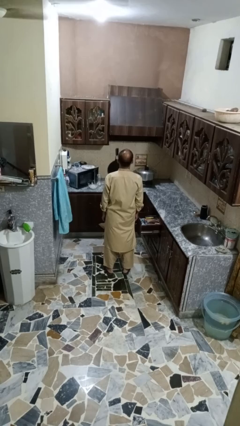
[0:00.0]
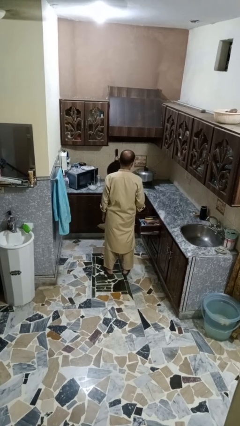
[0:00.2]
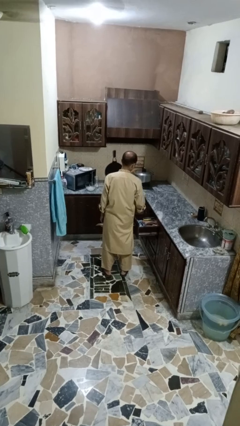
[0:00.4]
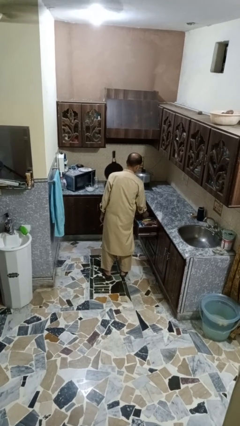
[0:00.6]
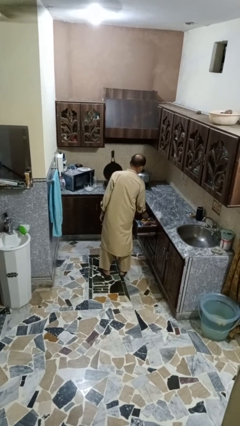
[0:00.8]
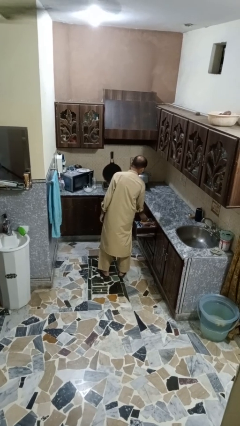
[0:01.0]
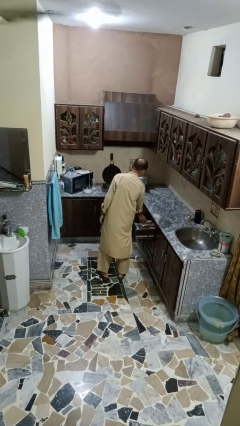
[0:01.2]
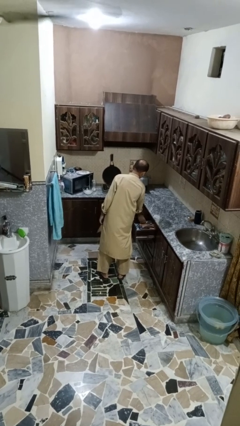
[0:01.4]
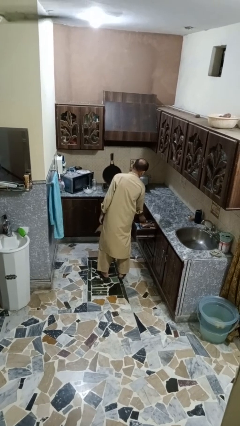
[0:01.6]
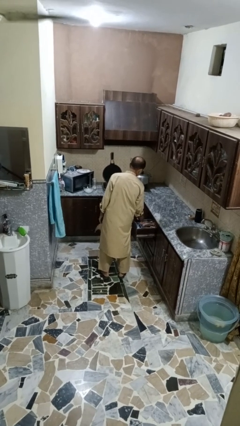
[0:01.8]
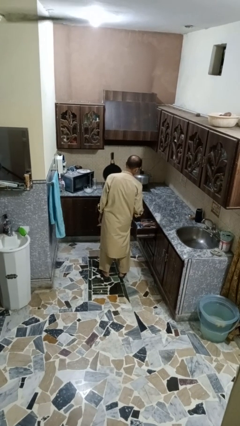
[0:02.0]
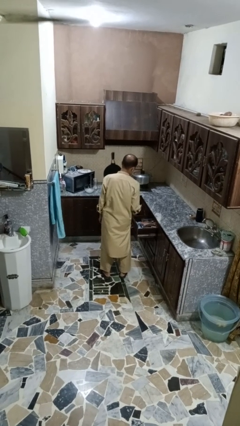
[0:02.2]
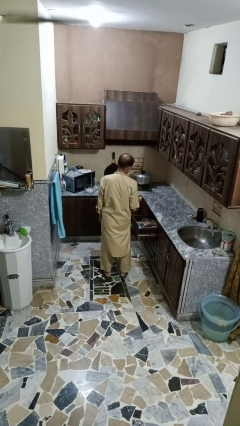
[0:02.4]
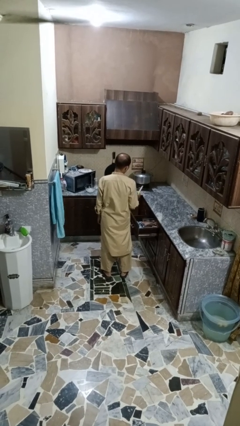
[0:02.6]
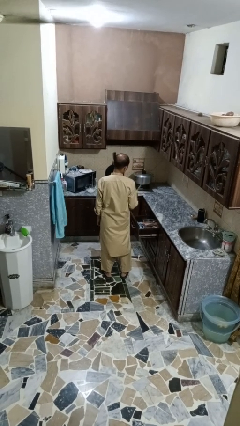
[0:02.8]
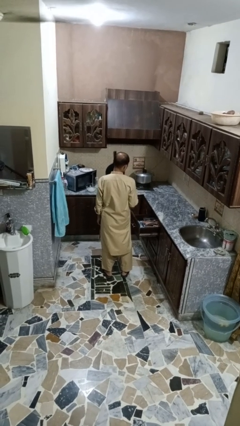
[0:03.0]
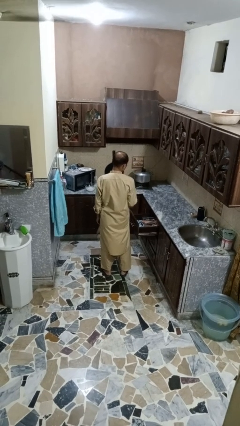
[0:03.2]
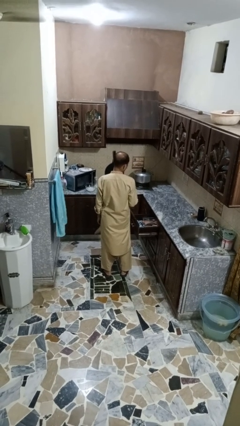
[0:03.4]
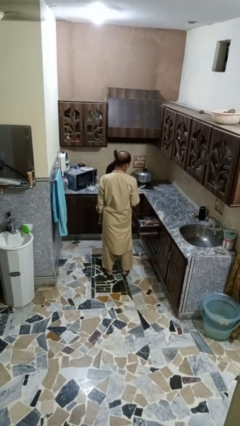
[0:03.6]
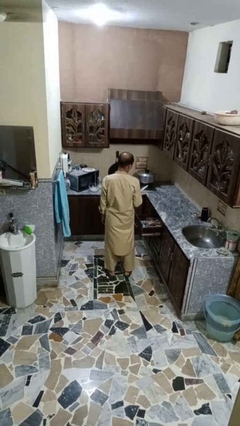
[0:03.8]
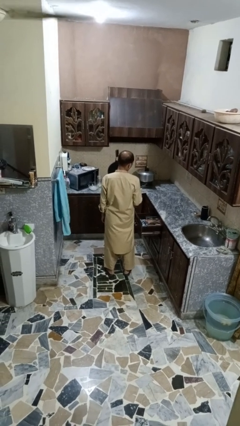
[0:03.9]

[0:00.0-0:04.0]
person takes object from kitchen drawer

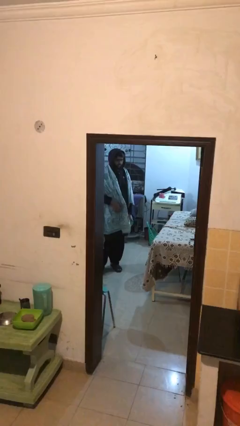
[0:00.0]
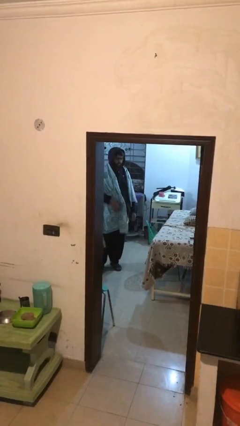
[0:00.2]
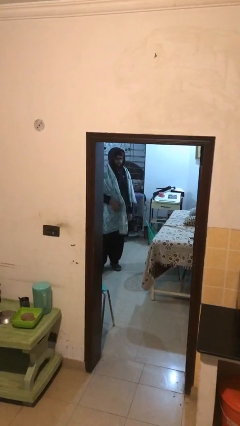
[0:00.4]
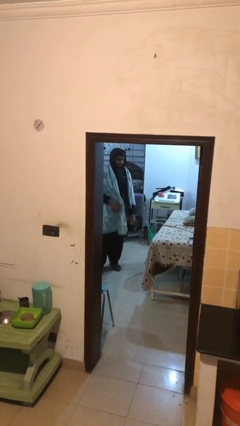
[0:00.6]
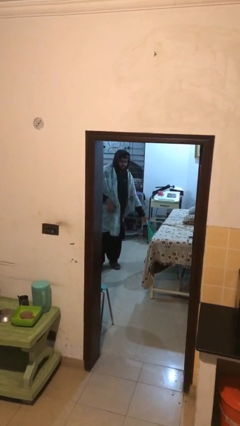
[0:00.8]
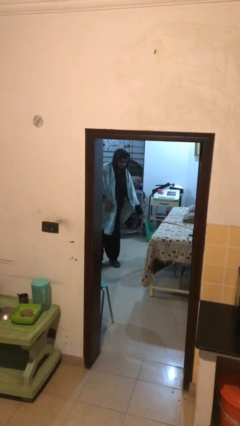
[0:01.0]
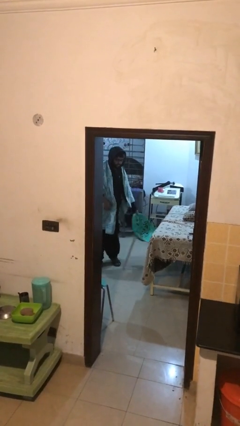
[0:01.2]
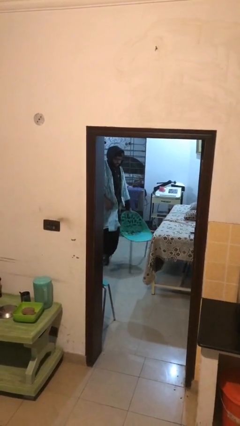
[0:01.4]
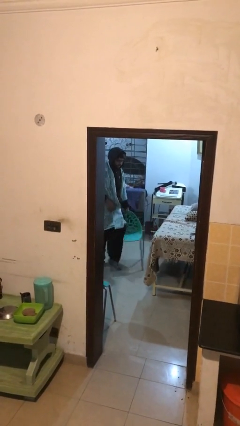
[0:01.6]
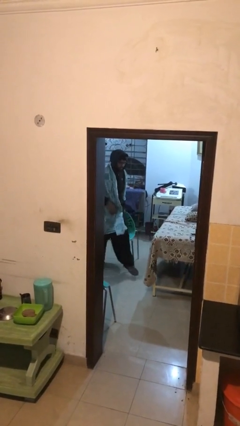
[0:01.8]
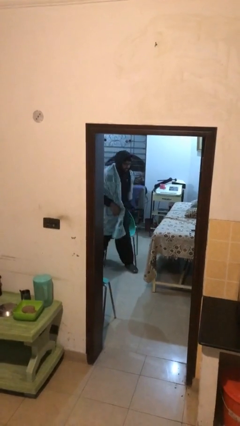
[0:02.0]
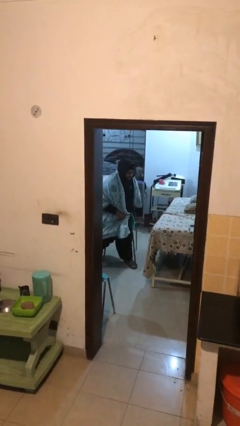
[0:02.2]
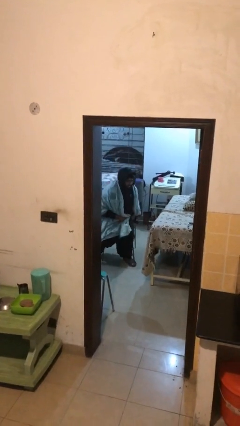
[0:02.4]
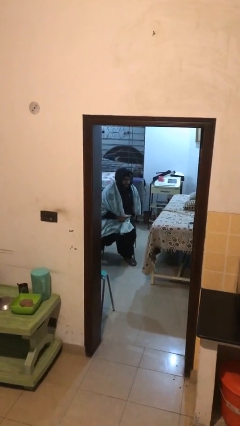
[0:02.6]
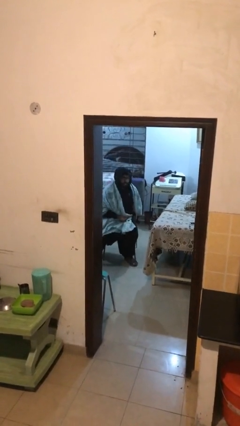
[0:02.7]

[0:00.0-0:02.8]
person sits down

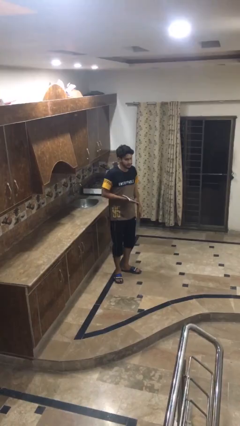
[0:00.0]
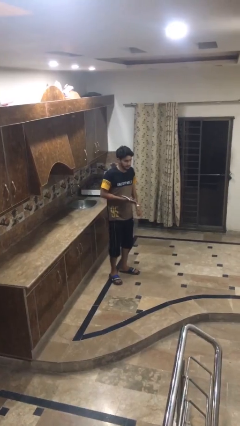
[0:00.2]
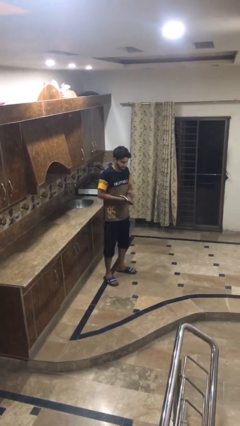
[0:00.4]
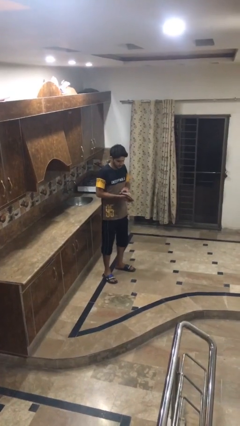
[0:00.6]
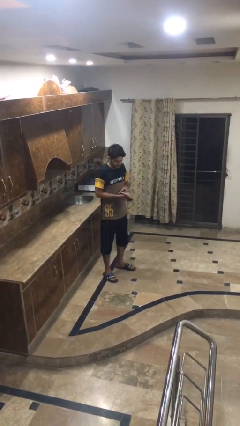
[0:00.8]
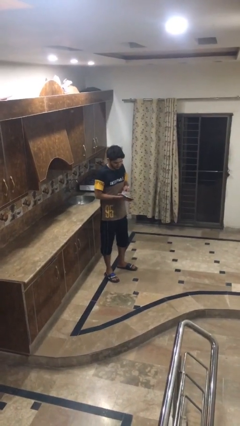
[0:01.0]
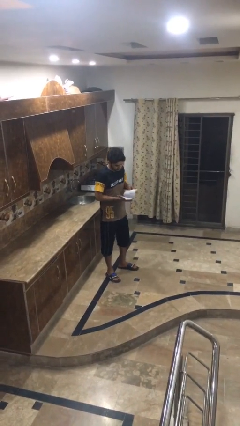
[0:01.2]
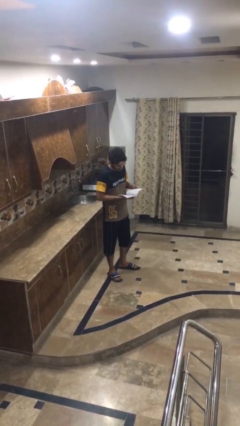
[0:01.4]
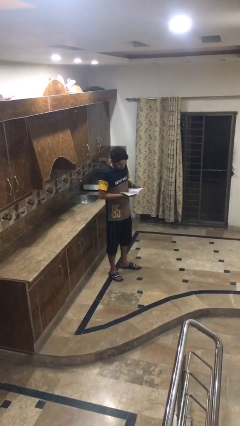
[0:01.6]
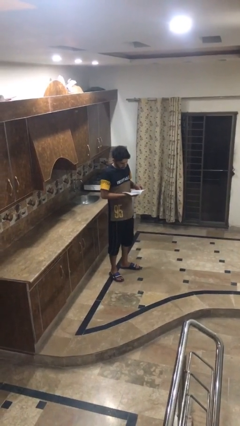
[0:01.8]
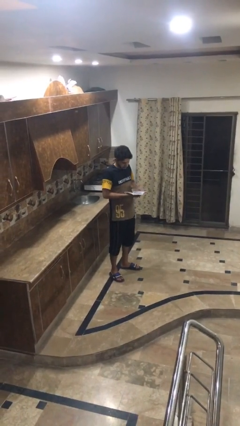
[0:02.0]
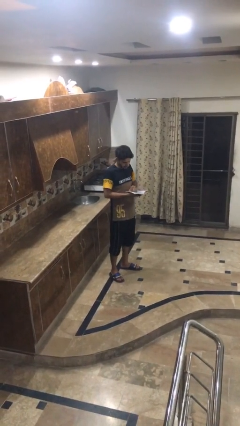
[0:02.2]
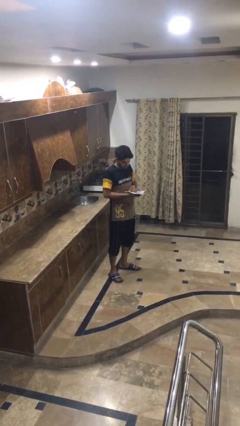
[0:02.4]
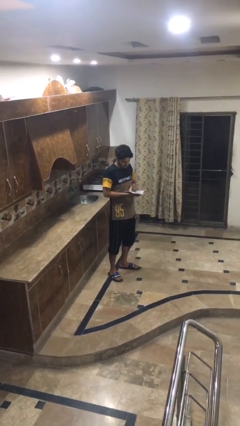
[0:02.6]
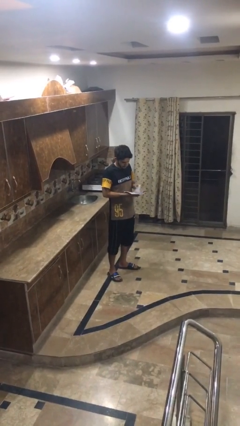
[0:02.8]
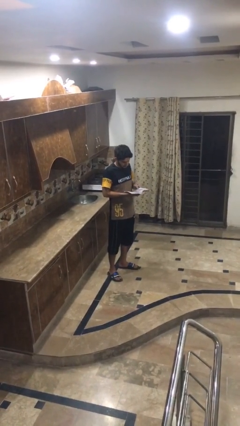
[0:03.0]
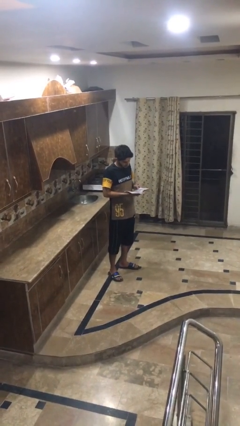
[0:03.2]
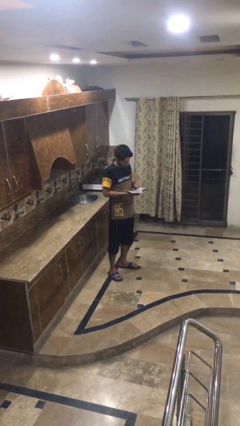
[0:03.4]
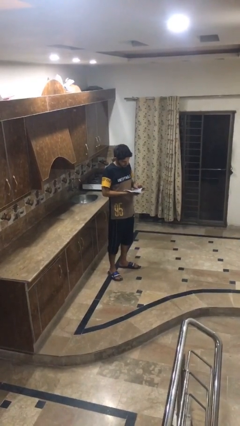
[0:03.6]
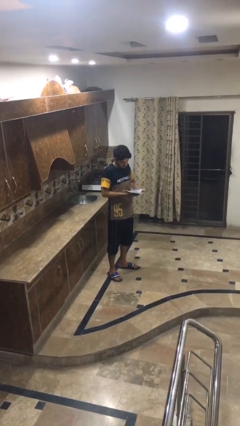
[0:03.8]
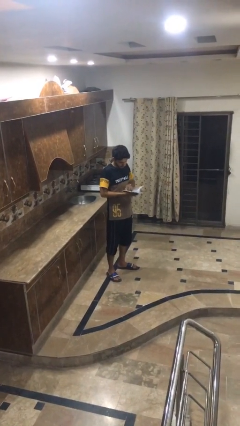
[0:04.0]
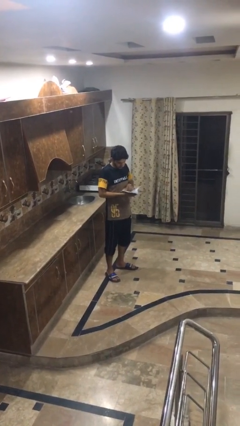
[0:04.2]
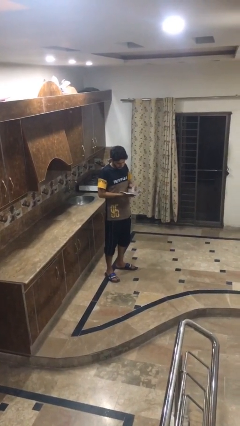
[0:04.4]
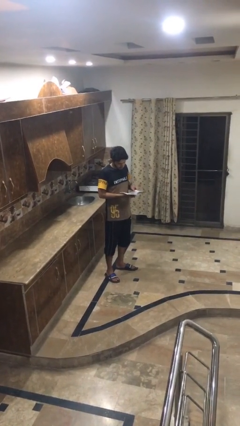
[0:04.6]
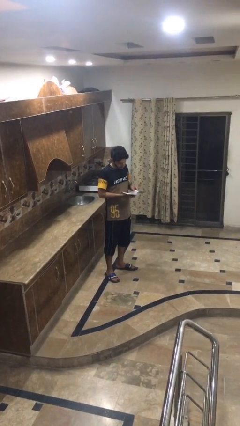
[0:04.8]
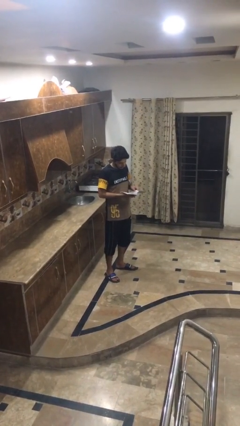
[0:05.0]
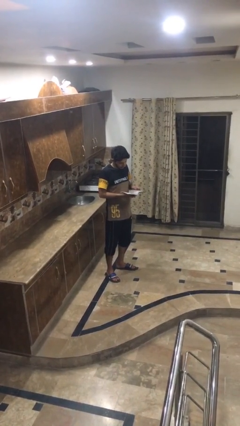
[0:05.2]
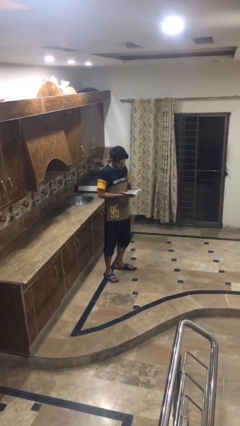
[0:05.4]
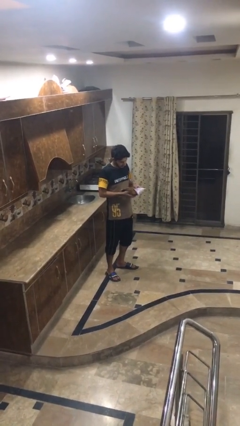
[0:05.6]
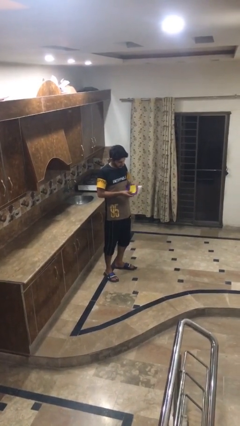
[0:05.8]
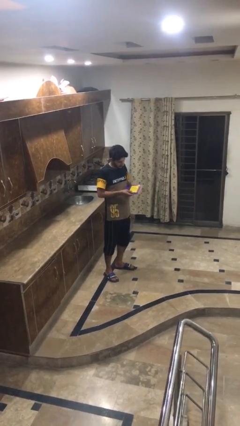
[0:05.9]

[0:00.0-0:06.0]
person reads book

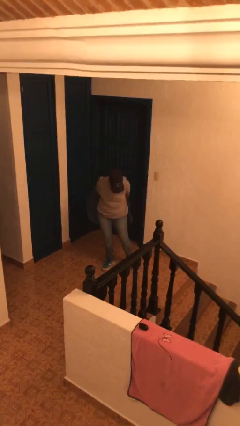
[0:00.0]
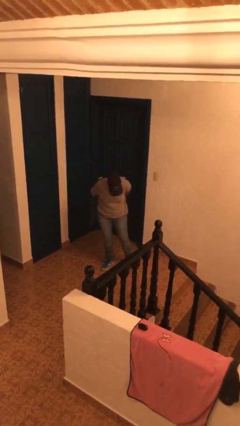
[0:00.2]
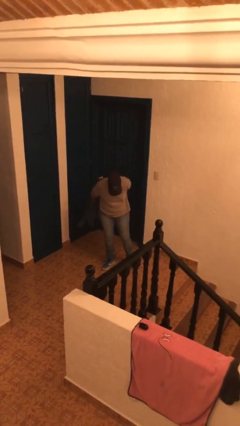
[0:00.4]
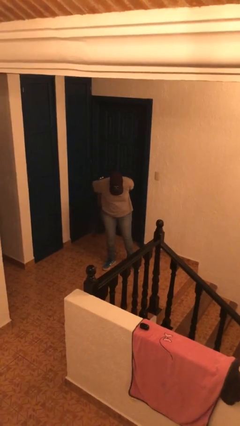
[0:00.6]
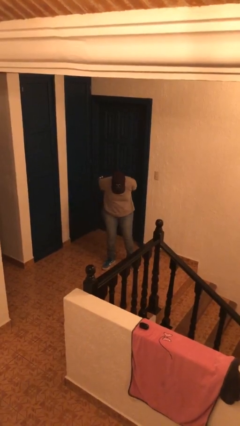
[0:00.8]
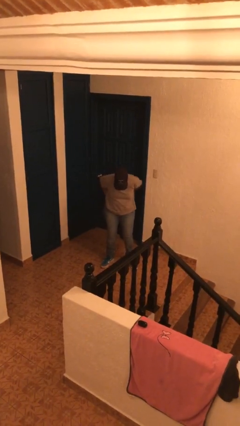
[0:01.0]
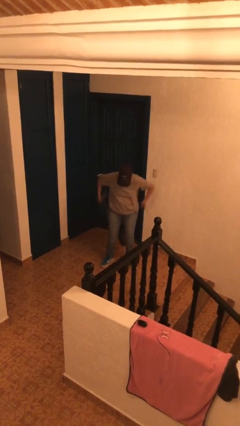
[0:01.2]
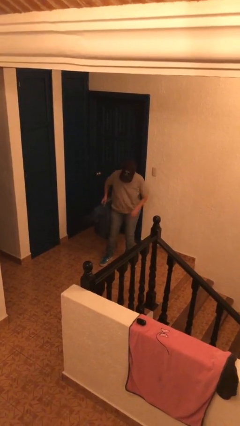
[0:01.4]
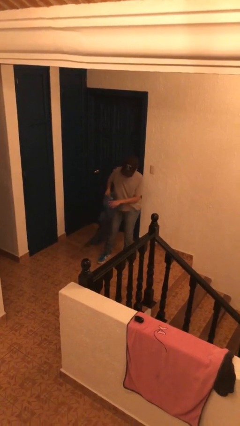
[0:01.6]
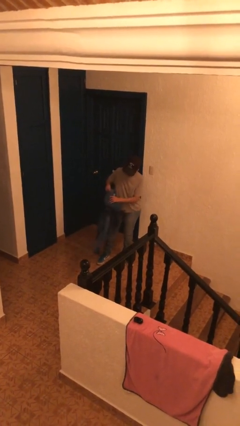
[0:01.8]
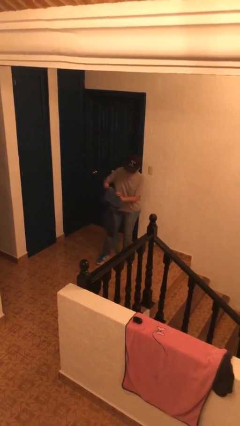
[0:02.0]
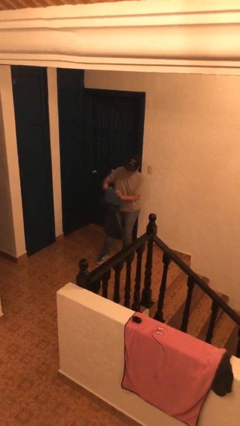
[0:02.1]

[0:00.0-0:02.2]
person takes off jacket

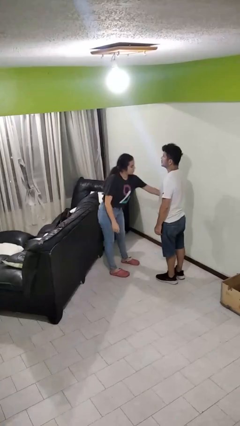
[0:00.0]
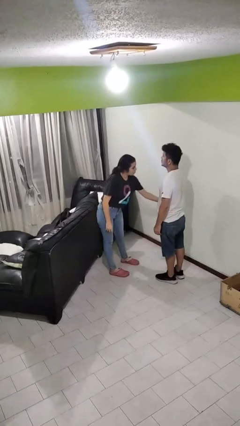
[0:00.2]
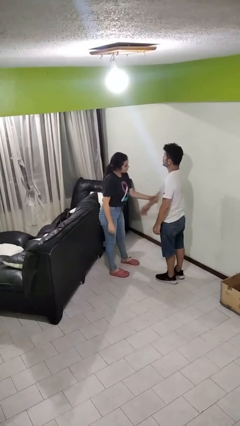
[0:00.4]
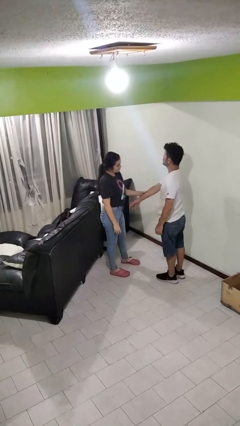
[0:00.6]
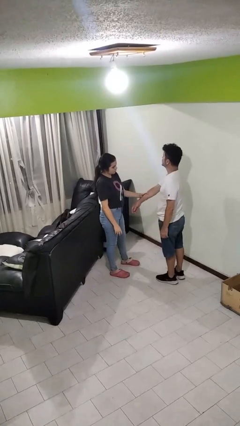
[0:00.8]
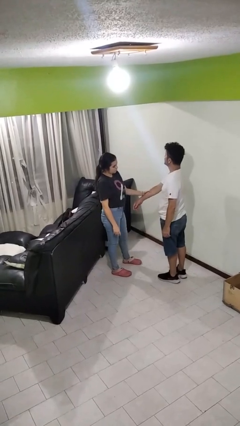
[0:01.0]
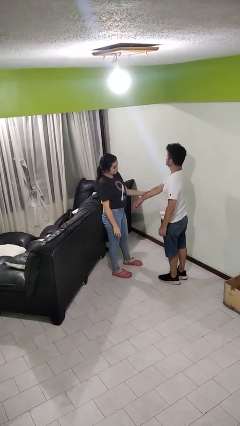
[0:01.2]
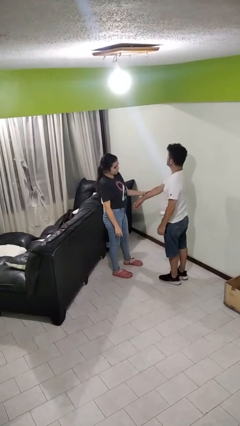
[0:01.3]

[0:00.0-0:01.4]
person grabs person by forearm

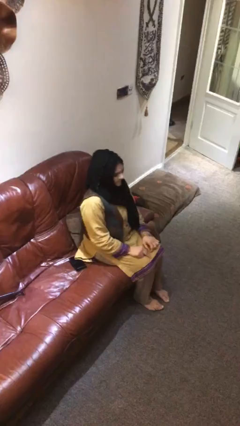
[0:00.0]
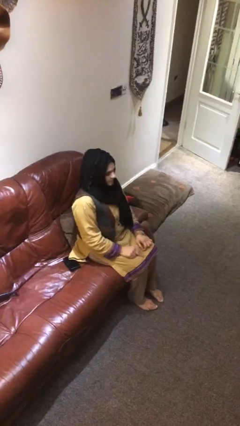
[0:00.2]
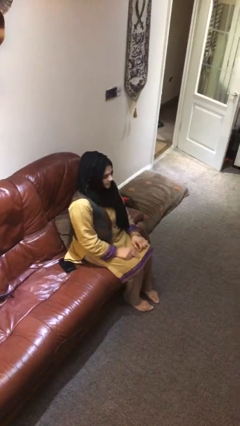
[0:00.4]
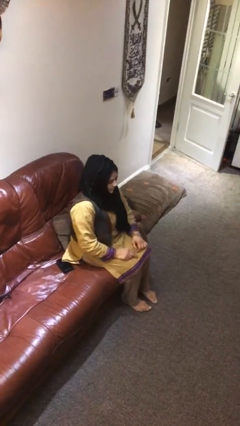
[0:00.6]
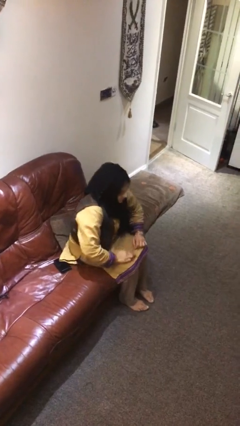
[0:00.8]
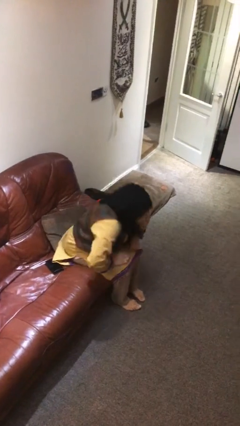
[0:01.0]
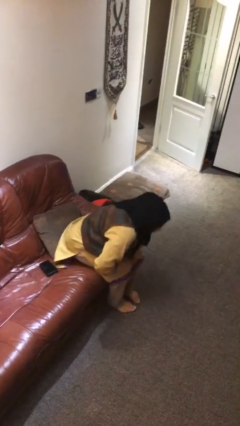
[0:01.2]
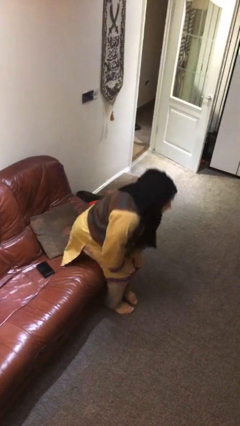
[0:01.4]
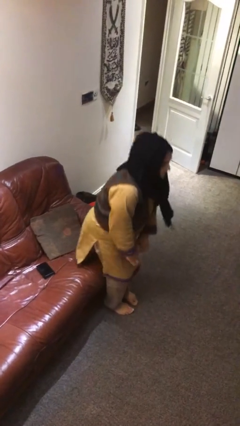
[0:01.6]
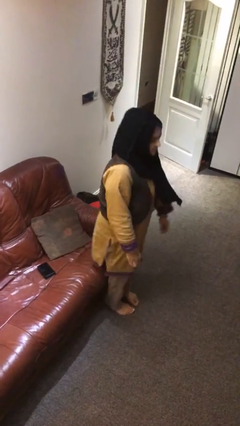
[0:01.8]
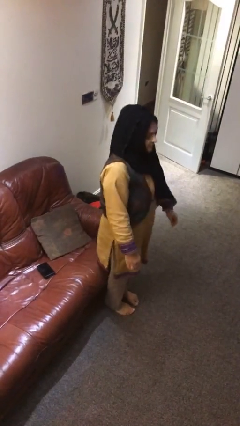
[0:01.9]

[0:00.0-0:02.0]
person stands up
